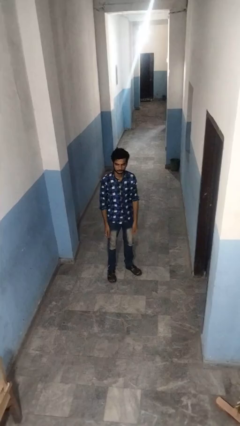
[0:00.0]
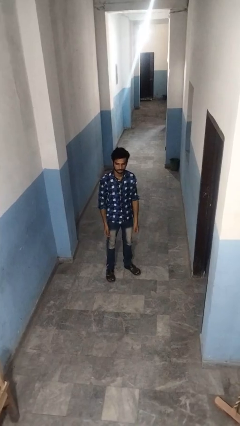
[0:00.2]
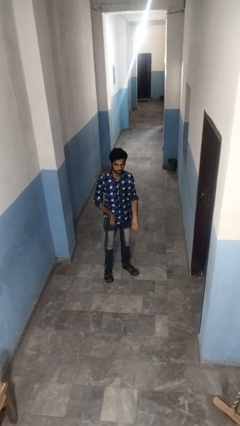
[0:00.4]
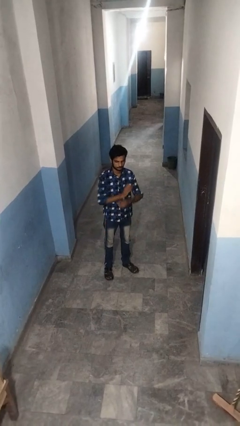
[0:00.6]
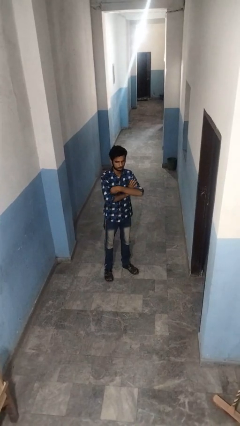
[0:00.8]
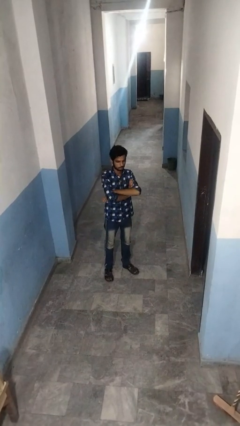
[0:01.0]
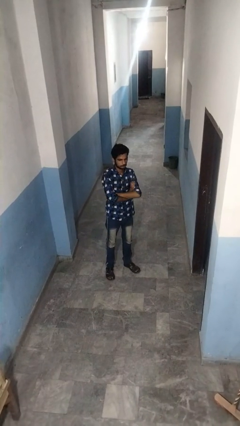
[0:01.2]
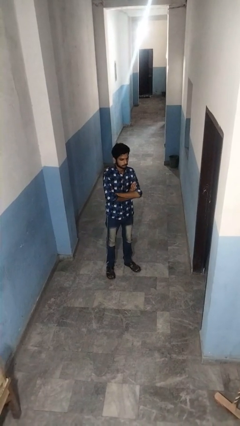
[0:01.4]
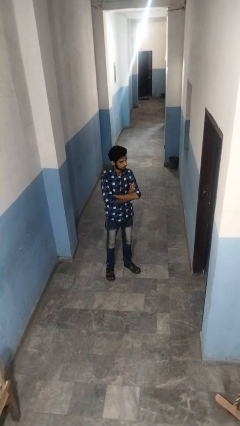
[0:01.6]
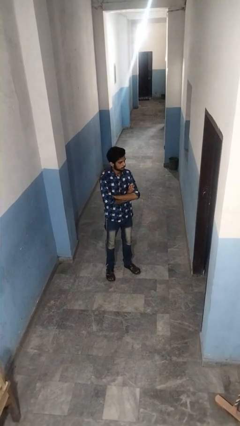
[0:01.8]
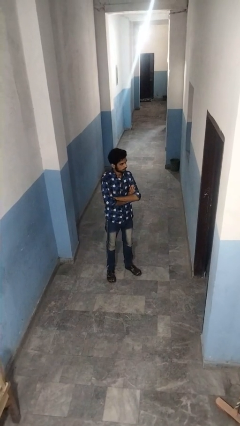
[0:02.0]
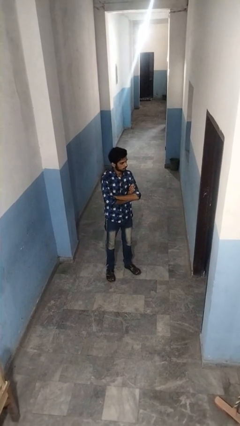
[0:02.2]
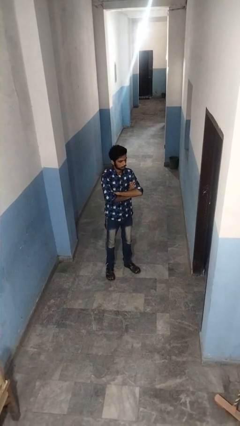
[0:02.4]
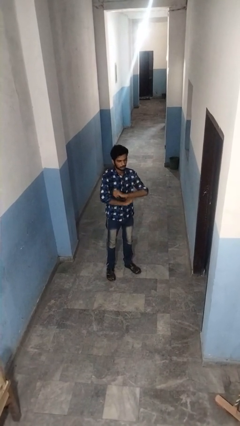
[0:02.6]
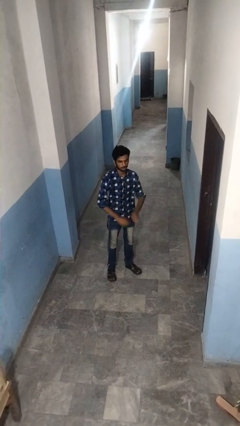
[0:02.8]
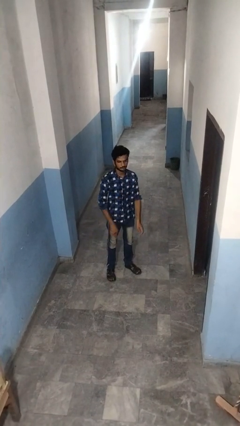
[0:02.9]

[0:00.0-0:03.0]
person crosses arms

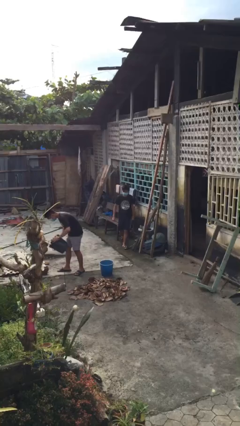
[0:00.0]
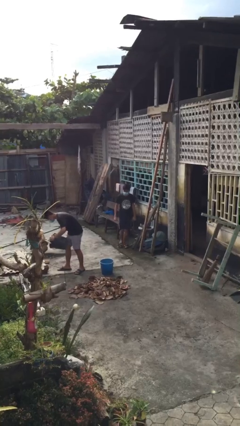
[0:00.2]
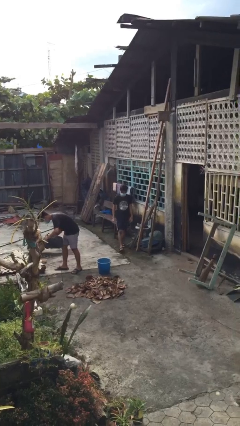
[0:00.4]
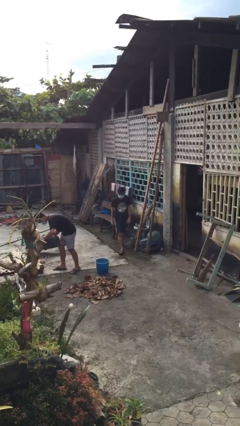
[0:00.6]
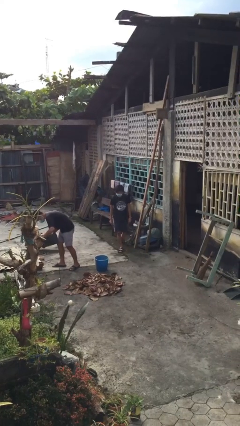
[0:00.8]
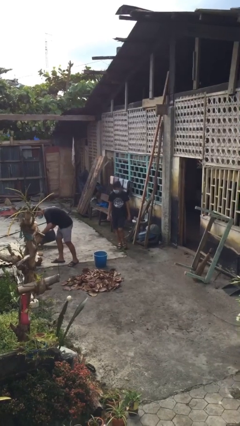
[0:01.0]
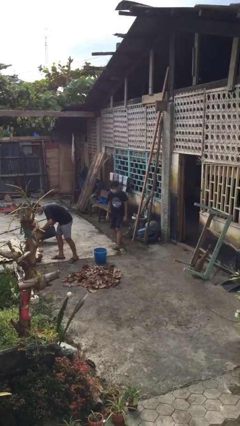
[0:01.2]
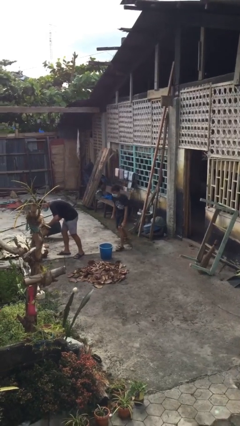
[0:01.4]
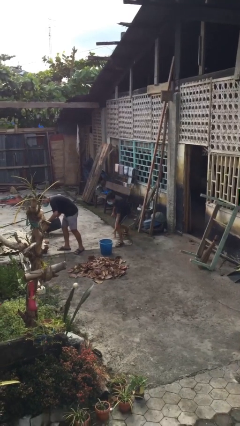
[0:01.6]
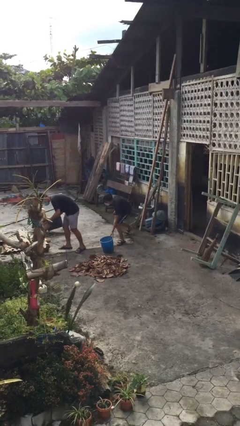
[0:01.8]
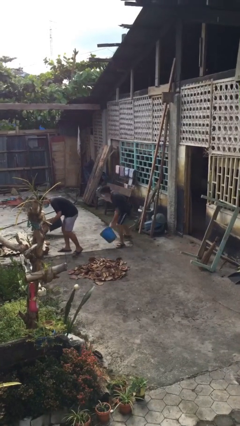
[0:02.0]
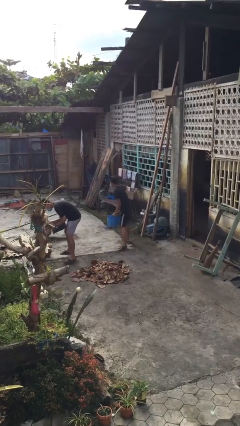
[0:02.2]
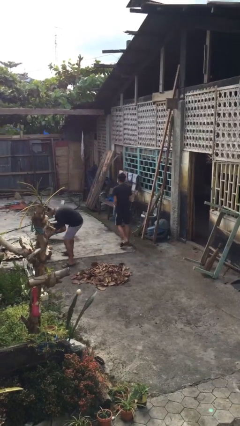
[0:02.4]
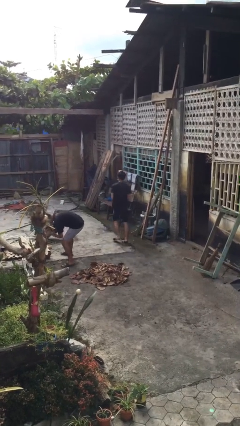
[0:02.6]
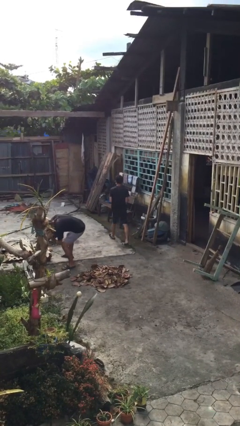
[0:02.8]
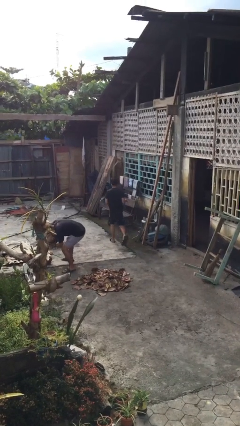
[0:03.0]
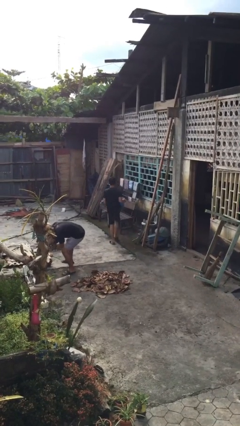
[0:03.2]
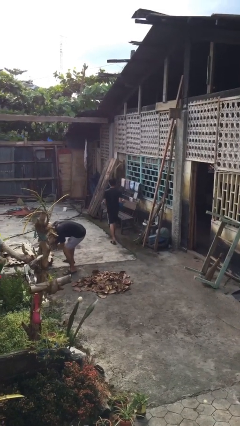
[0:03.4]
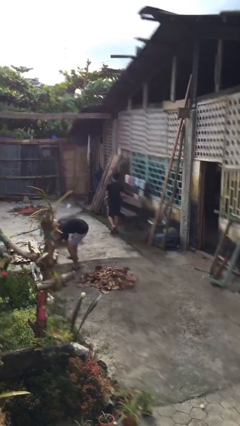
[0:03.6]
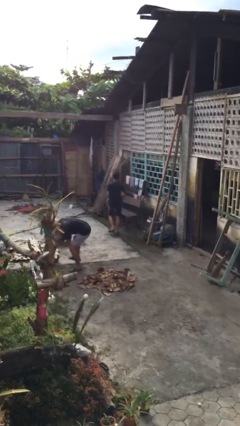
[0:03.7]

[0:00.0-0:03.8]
person steals object from person

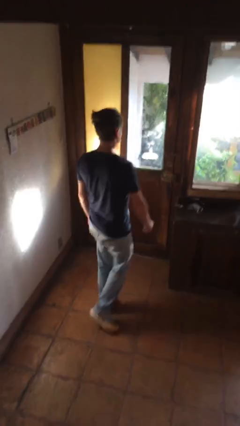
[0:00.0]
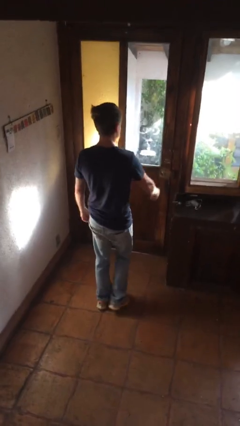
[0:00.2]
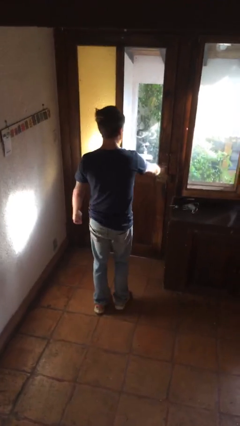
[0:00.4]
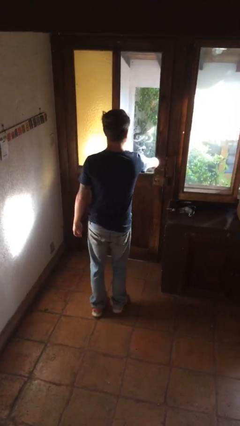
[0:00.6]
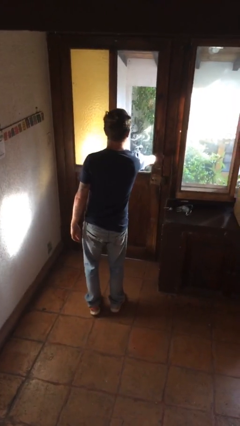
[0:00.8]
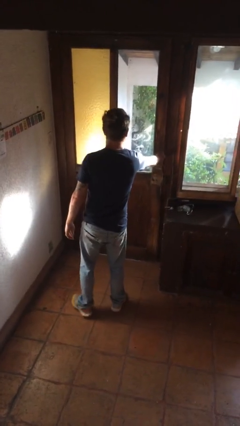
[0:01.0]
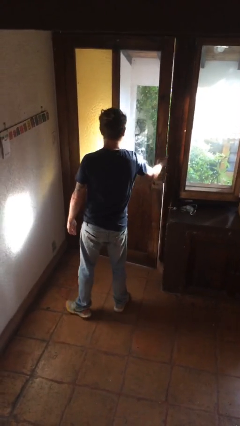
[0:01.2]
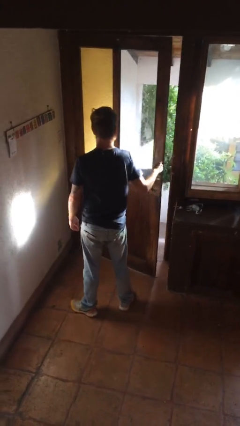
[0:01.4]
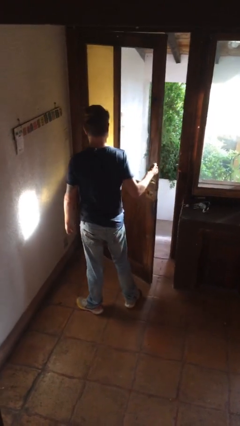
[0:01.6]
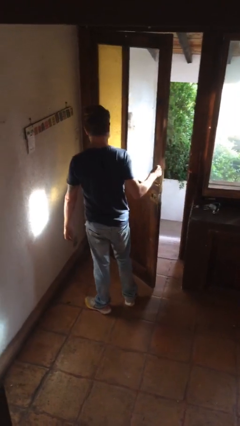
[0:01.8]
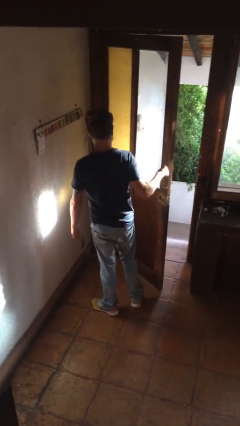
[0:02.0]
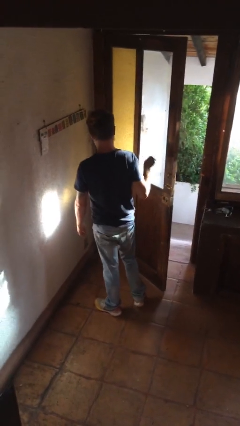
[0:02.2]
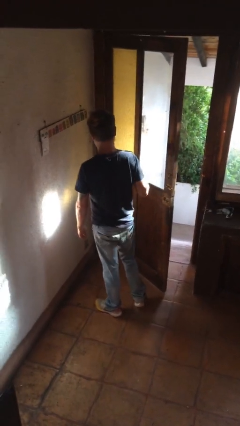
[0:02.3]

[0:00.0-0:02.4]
person opens facility door

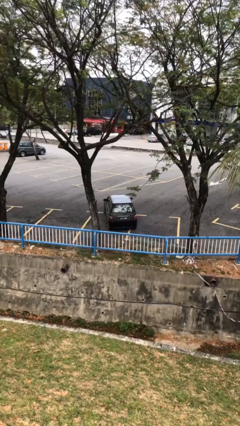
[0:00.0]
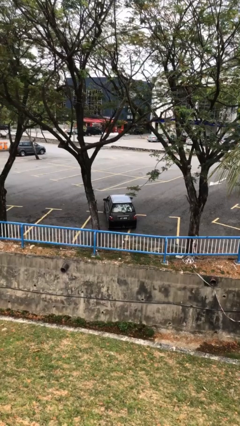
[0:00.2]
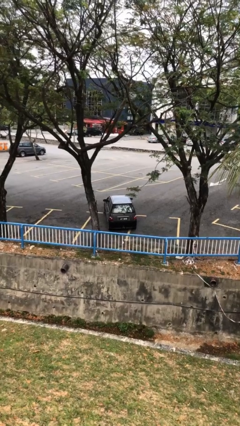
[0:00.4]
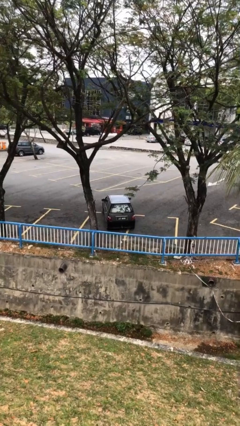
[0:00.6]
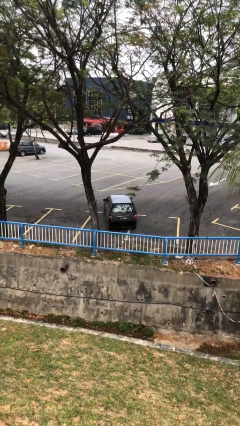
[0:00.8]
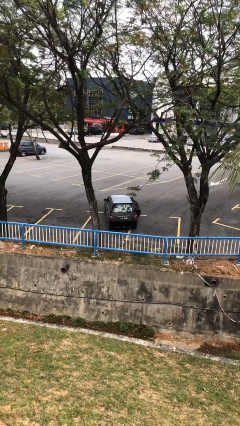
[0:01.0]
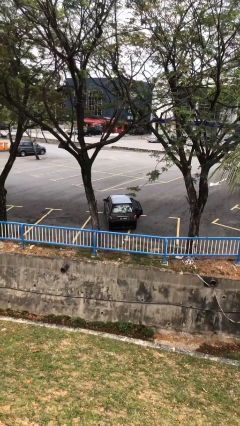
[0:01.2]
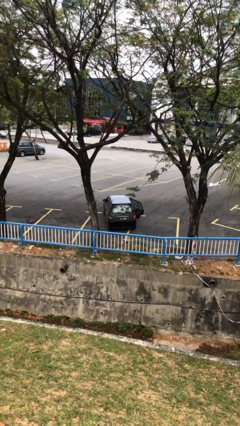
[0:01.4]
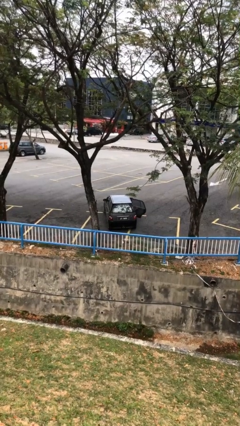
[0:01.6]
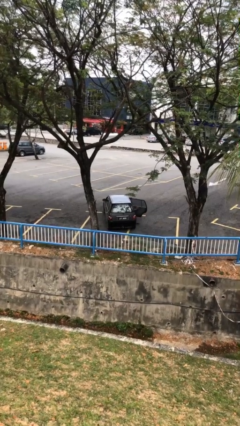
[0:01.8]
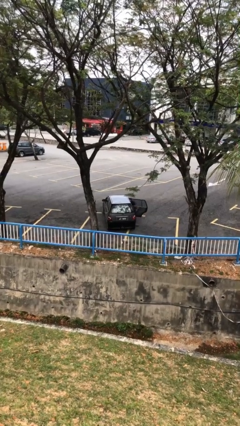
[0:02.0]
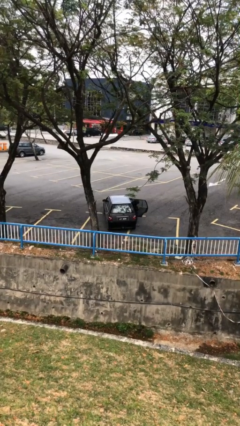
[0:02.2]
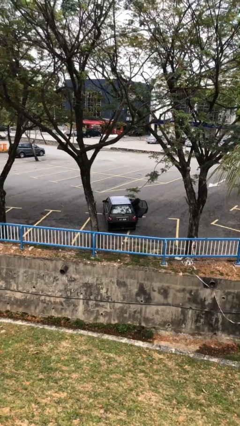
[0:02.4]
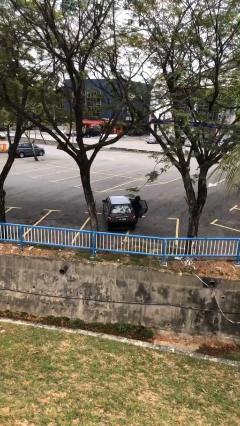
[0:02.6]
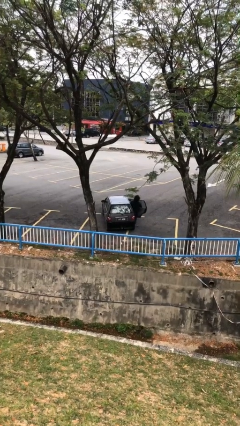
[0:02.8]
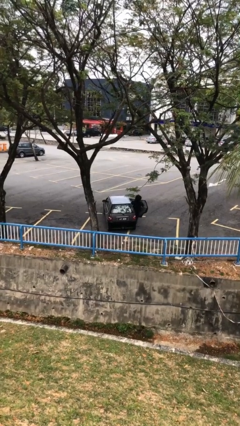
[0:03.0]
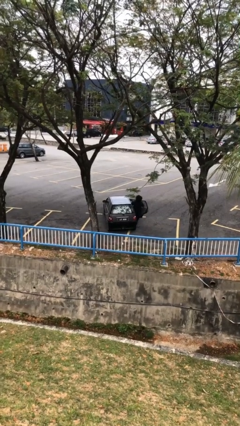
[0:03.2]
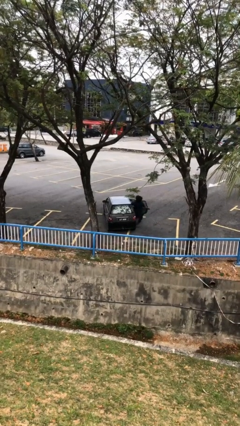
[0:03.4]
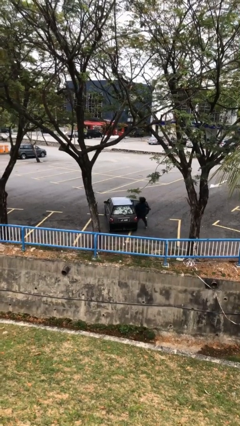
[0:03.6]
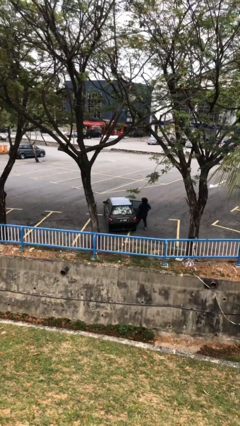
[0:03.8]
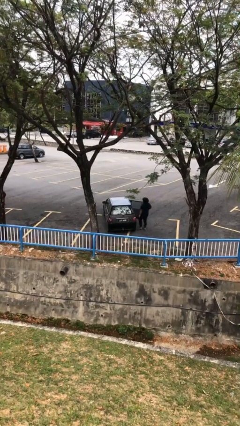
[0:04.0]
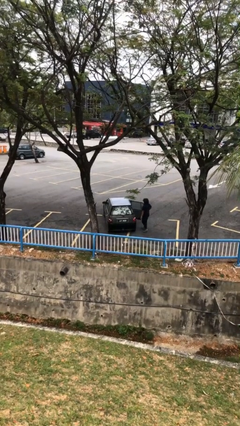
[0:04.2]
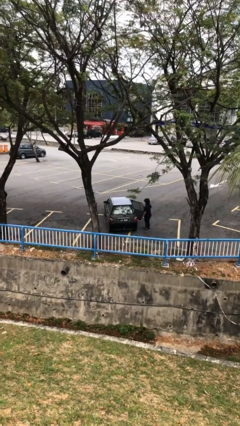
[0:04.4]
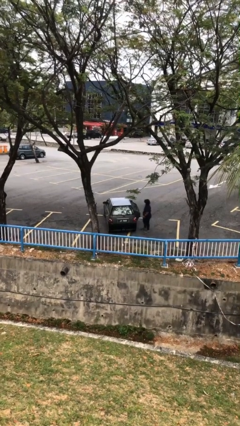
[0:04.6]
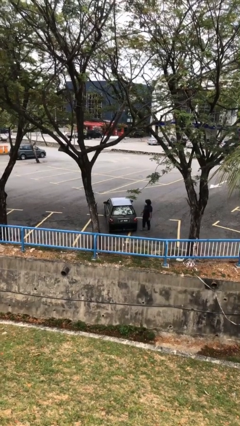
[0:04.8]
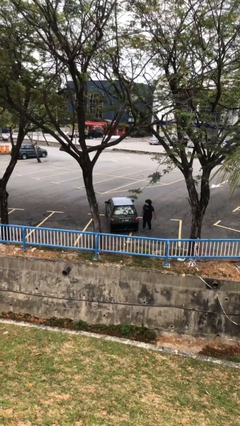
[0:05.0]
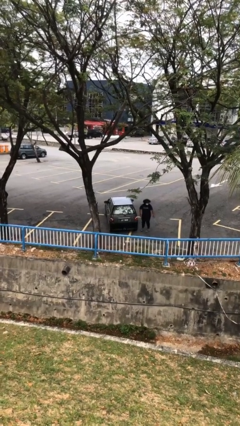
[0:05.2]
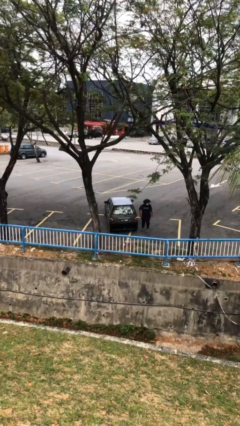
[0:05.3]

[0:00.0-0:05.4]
car drops off person

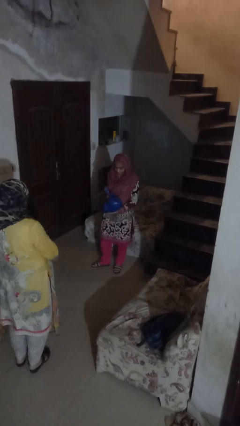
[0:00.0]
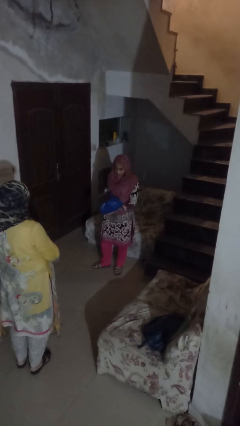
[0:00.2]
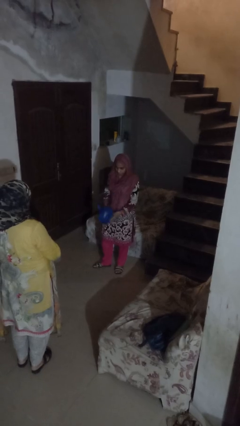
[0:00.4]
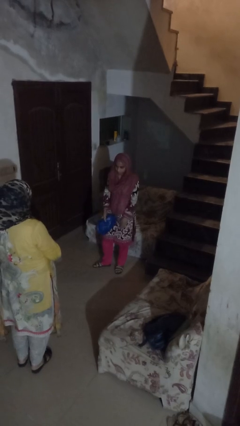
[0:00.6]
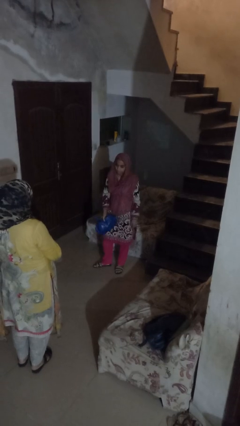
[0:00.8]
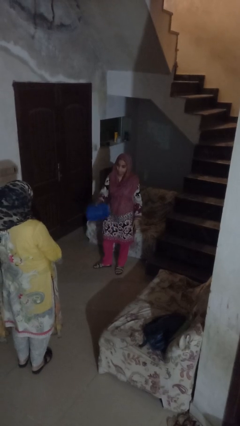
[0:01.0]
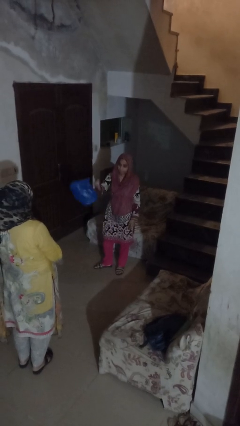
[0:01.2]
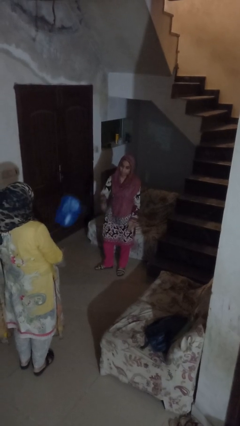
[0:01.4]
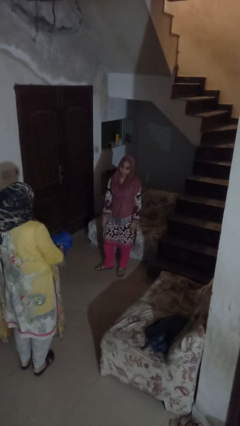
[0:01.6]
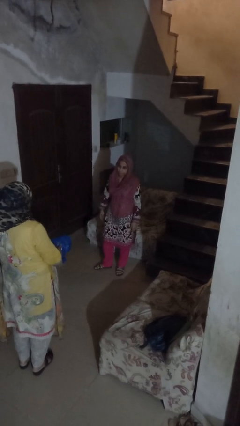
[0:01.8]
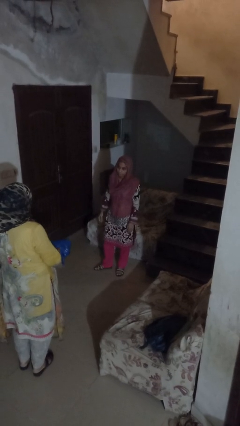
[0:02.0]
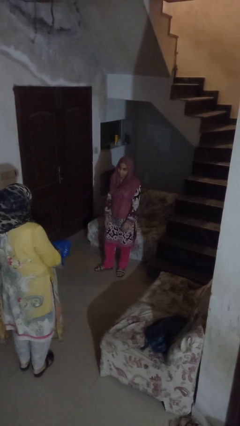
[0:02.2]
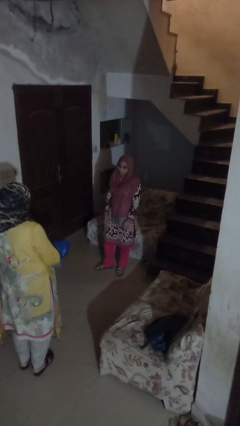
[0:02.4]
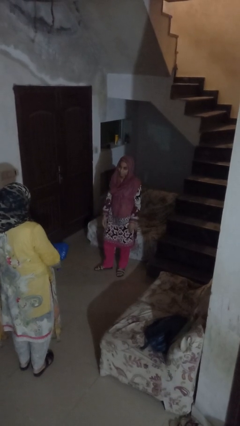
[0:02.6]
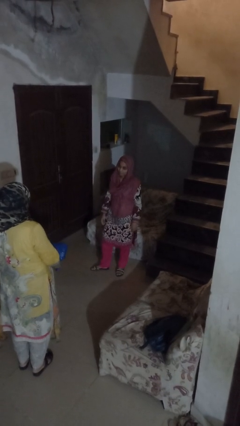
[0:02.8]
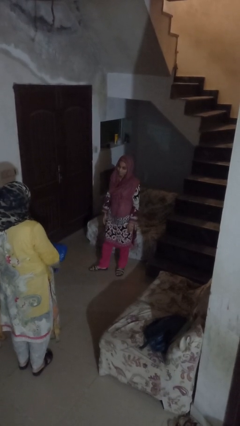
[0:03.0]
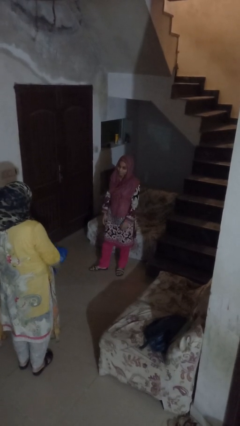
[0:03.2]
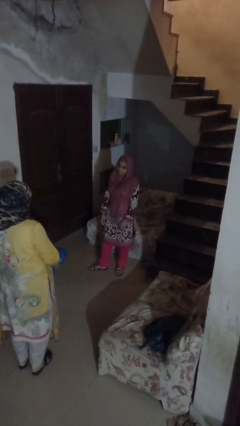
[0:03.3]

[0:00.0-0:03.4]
person throws object to person
